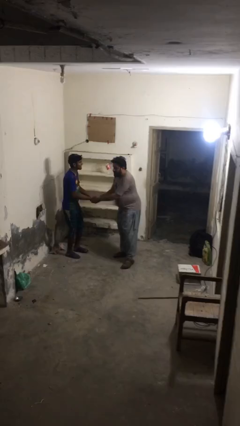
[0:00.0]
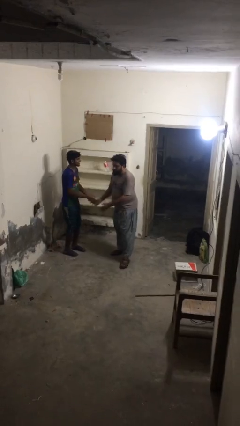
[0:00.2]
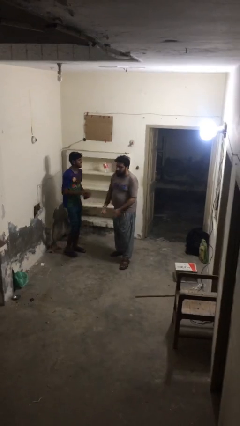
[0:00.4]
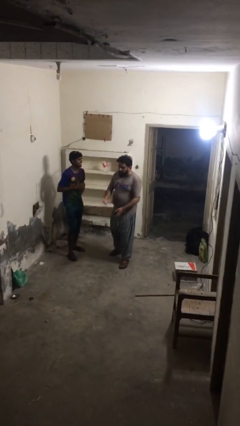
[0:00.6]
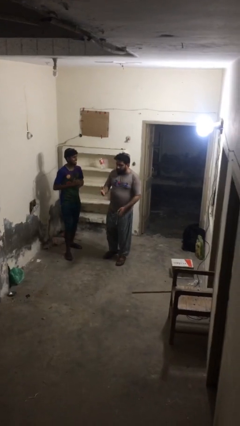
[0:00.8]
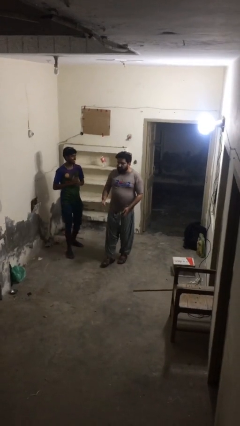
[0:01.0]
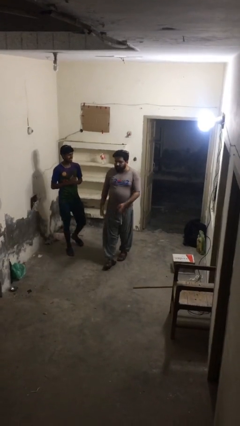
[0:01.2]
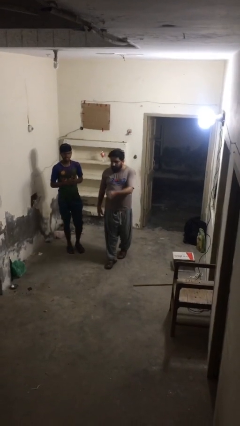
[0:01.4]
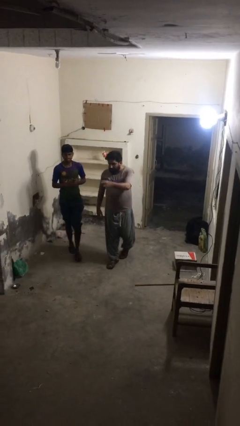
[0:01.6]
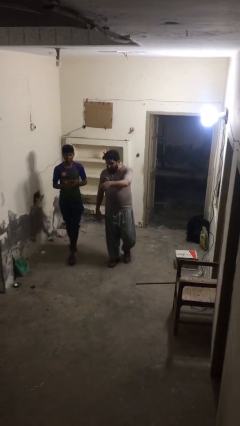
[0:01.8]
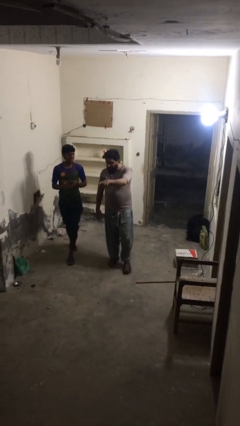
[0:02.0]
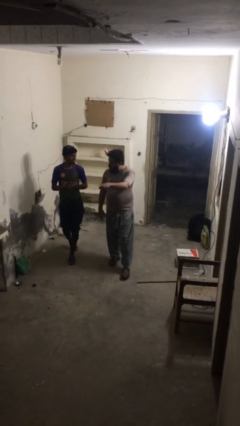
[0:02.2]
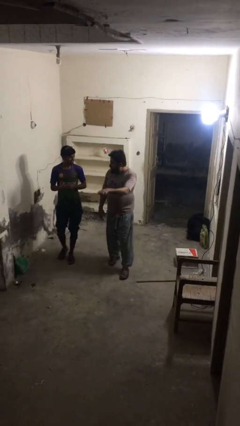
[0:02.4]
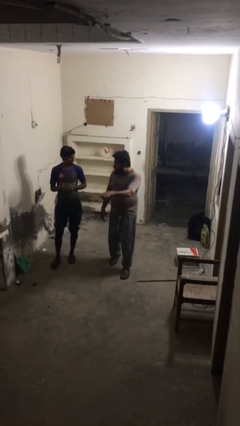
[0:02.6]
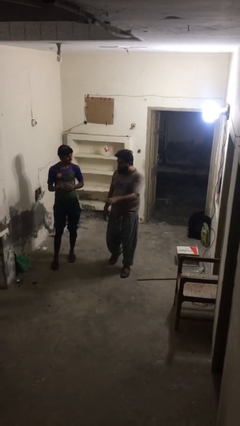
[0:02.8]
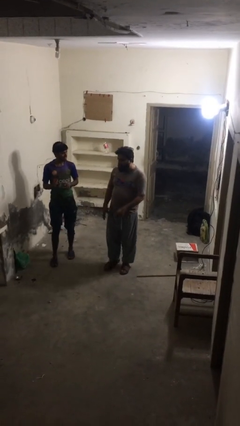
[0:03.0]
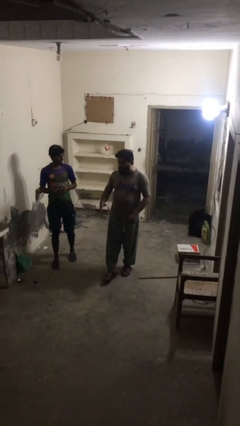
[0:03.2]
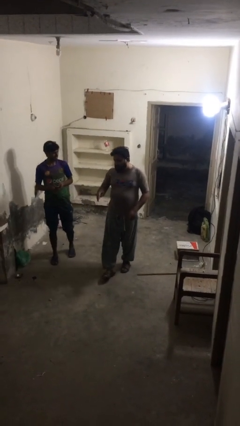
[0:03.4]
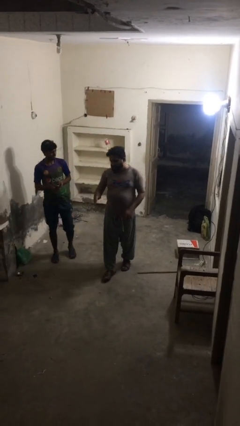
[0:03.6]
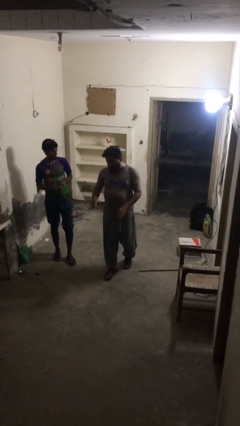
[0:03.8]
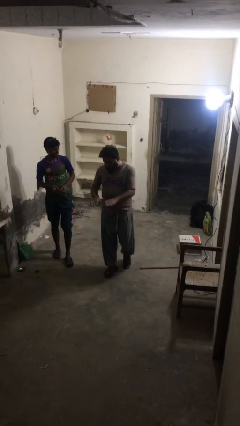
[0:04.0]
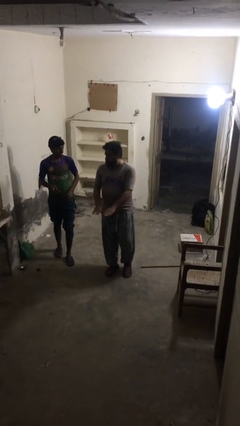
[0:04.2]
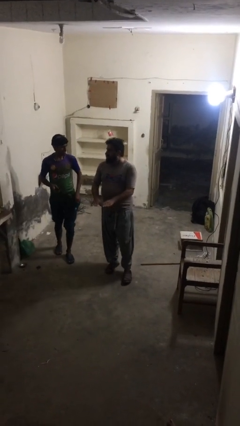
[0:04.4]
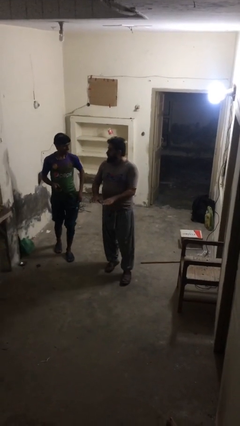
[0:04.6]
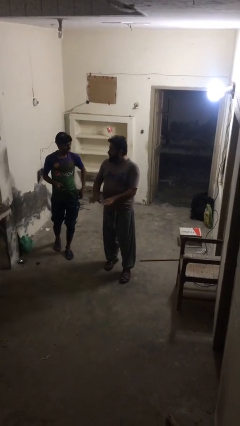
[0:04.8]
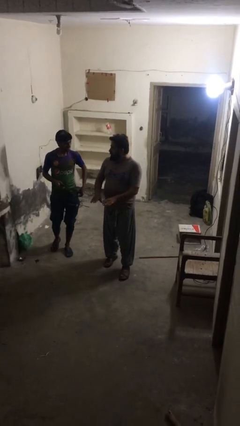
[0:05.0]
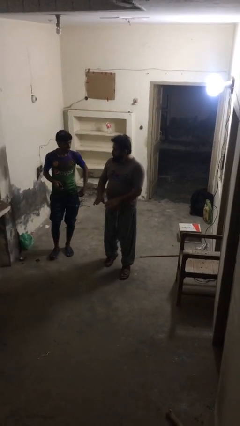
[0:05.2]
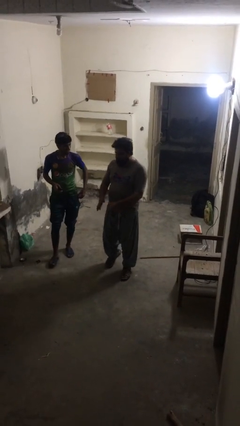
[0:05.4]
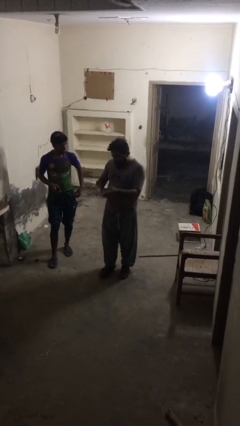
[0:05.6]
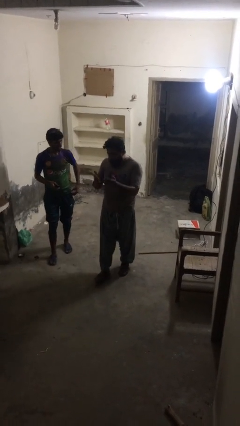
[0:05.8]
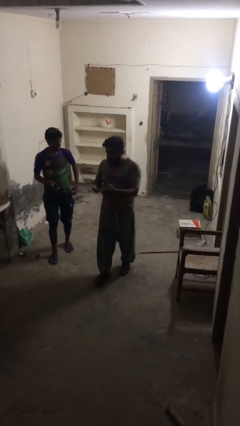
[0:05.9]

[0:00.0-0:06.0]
person talks to person

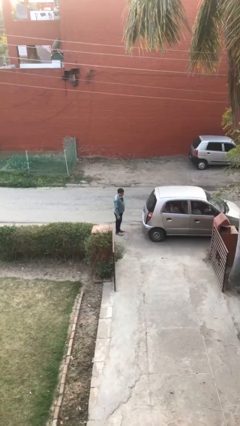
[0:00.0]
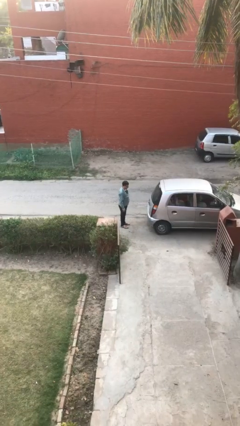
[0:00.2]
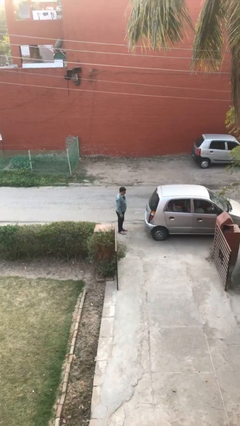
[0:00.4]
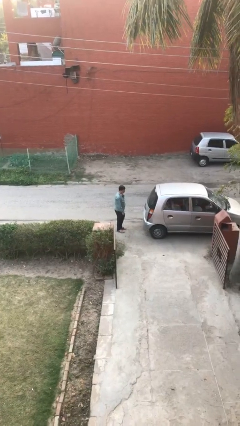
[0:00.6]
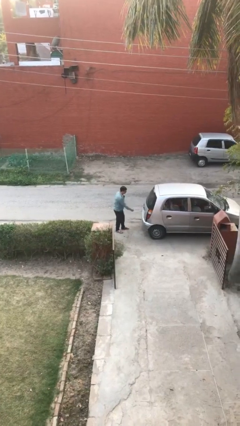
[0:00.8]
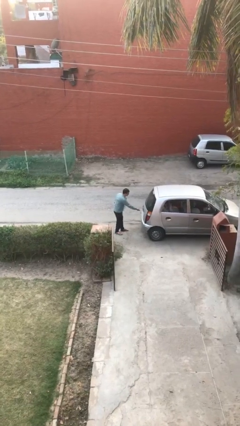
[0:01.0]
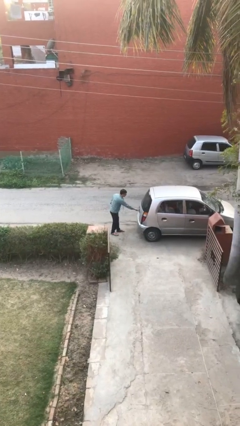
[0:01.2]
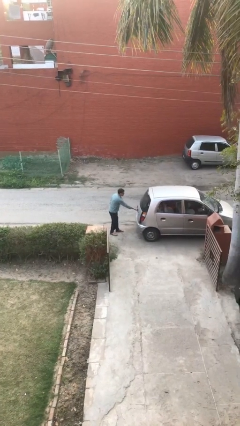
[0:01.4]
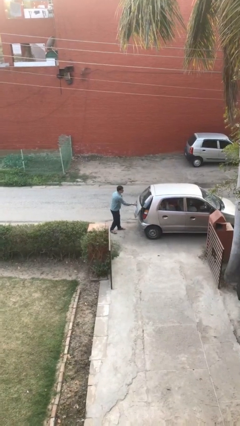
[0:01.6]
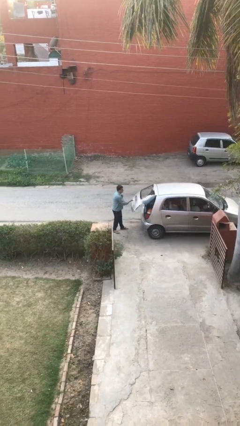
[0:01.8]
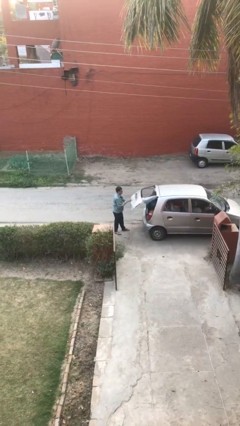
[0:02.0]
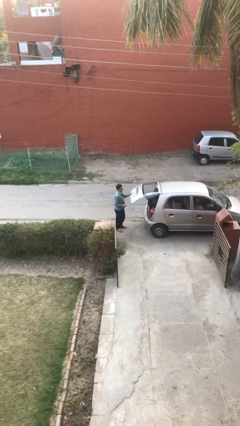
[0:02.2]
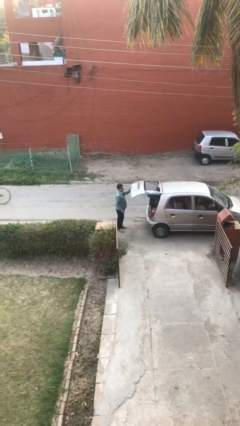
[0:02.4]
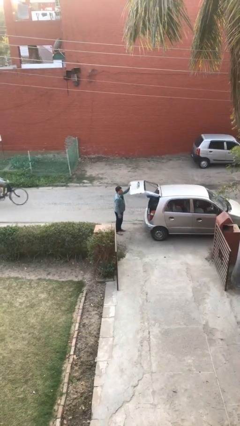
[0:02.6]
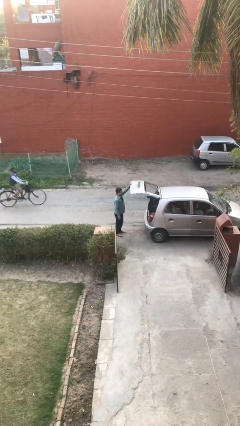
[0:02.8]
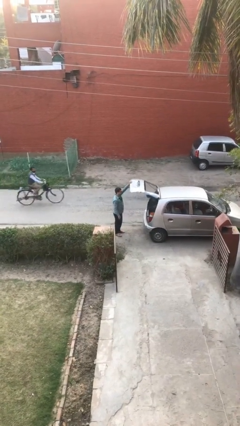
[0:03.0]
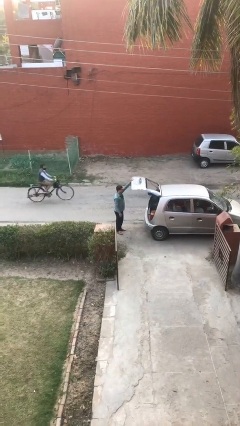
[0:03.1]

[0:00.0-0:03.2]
person opens car trunk

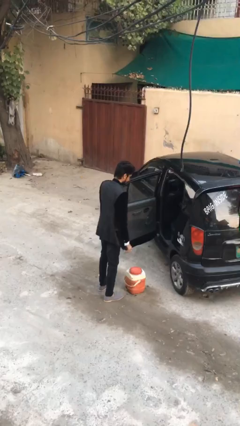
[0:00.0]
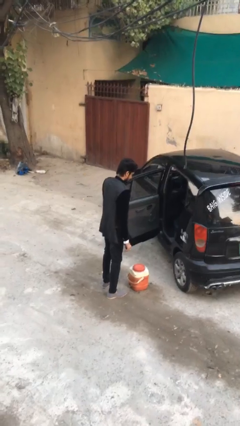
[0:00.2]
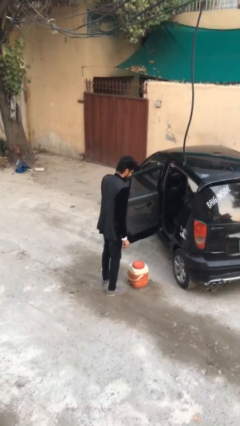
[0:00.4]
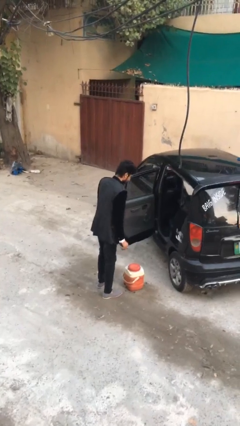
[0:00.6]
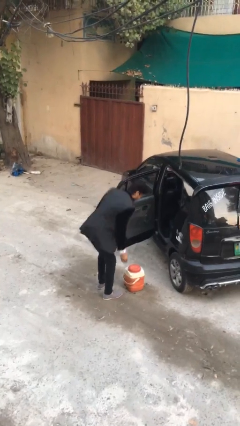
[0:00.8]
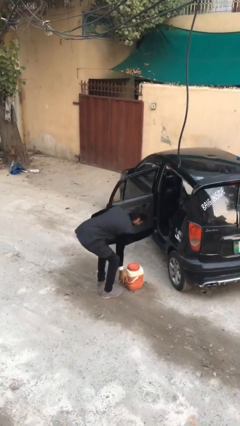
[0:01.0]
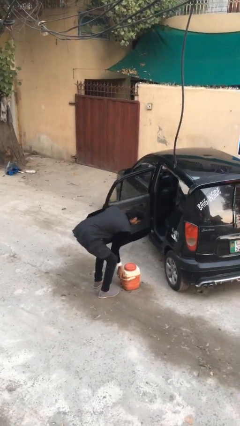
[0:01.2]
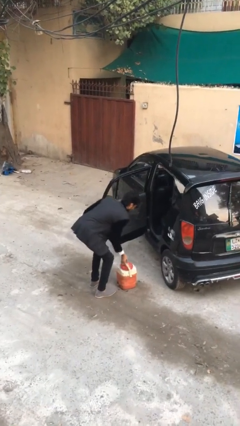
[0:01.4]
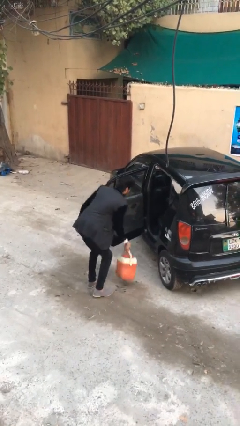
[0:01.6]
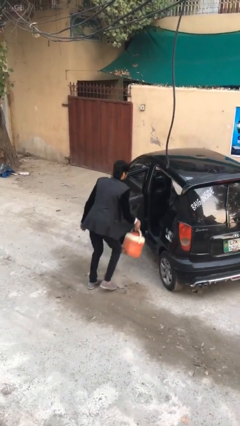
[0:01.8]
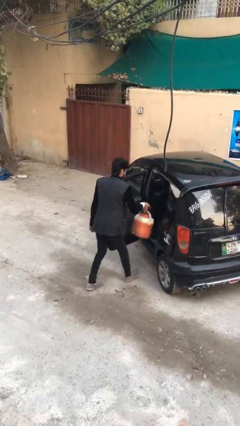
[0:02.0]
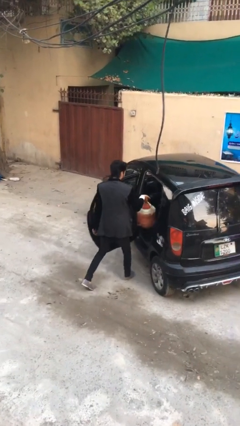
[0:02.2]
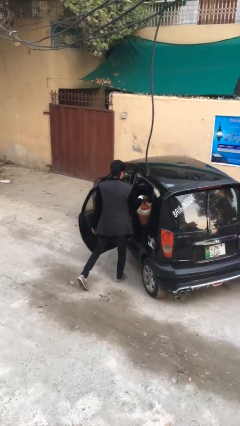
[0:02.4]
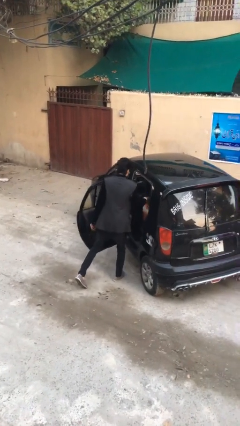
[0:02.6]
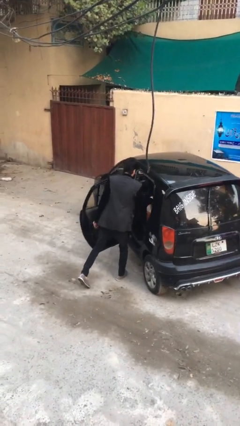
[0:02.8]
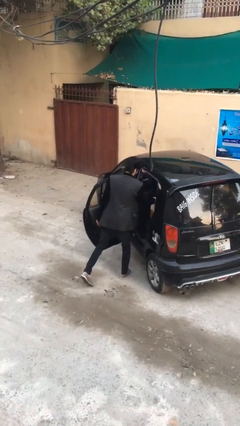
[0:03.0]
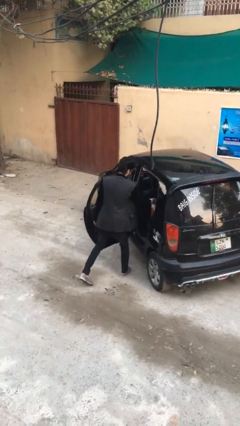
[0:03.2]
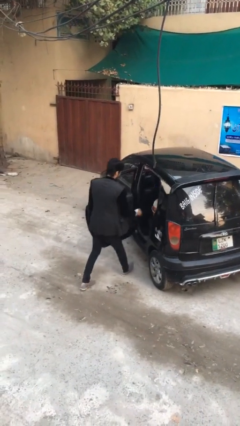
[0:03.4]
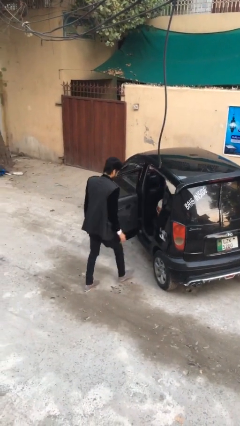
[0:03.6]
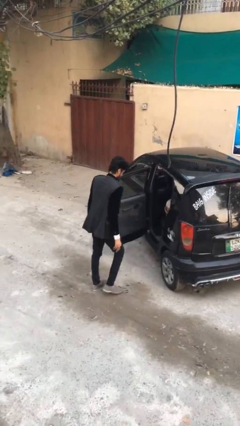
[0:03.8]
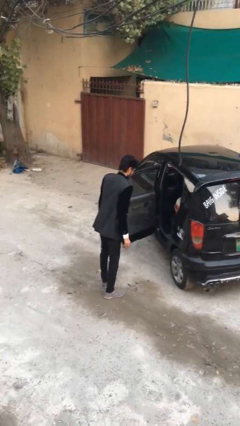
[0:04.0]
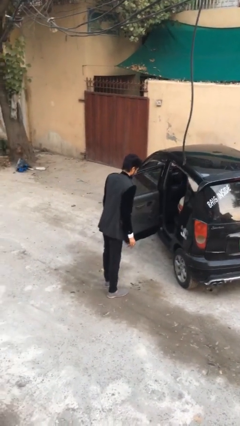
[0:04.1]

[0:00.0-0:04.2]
person loads car

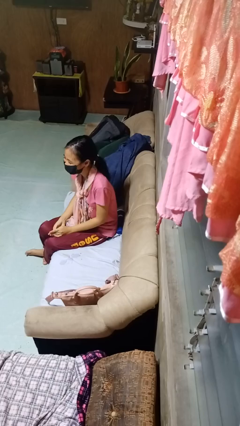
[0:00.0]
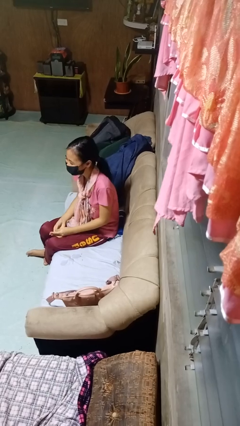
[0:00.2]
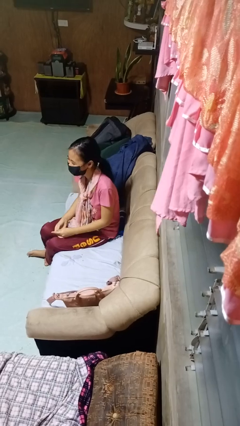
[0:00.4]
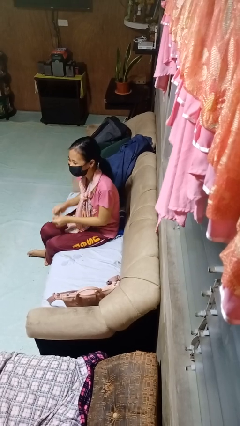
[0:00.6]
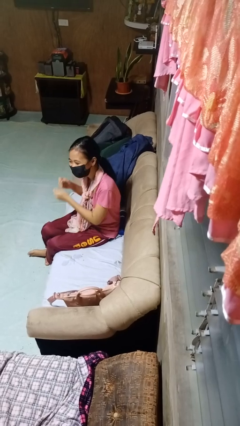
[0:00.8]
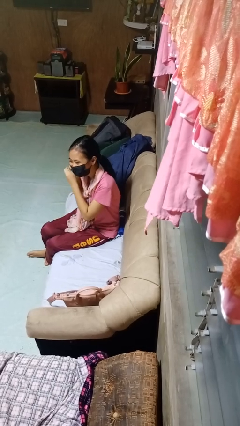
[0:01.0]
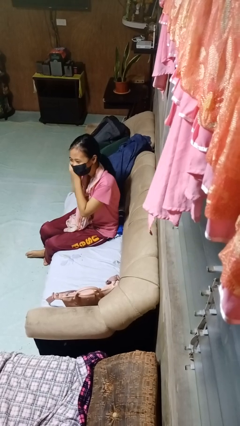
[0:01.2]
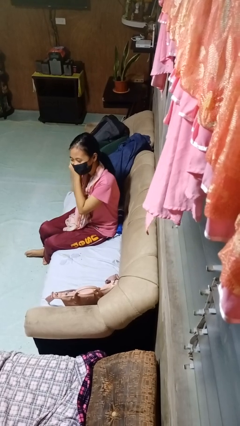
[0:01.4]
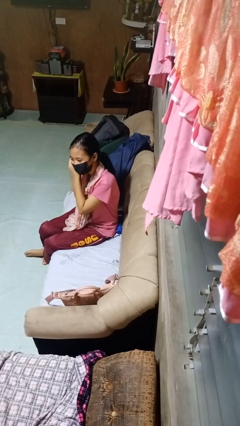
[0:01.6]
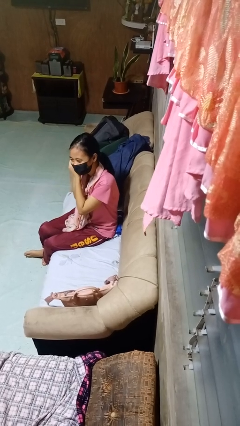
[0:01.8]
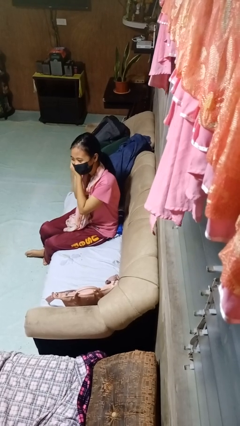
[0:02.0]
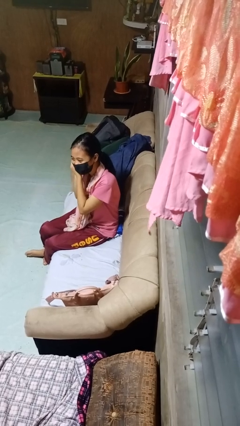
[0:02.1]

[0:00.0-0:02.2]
person puts on earrings

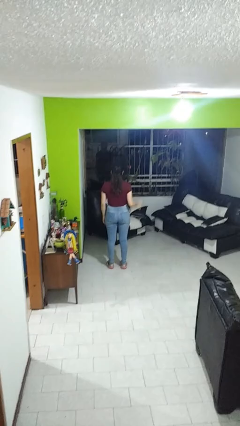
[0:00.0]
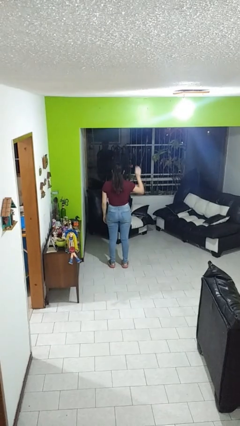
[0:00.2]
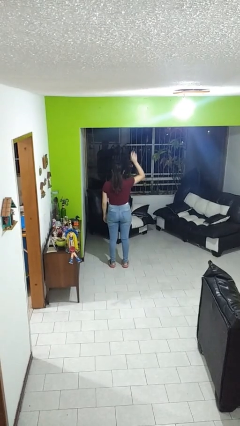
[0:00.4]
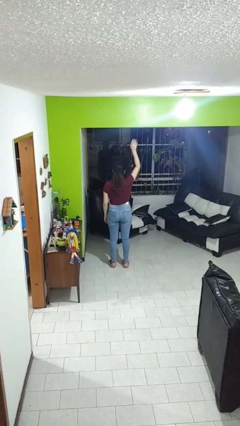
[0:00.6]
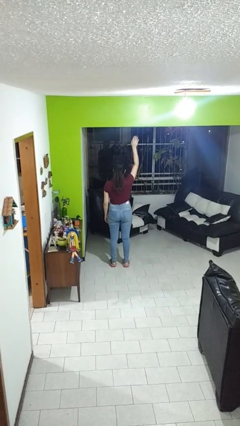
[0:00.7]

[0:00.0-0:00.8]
person gestures raise hand

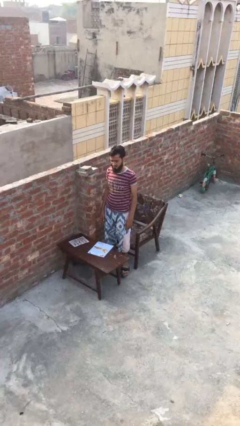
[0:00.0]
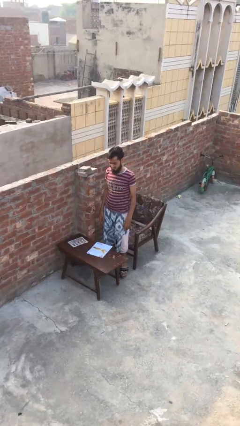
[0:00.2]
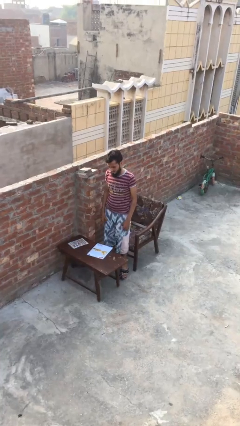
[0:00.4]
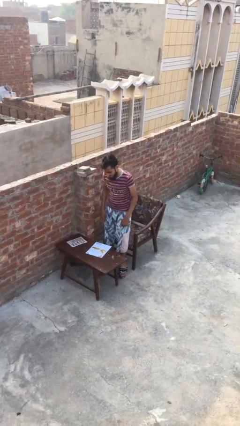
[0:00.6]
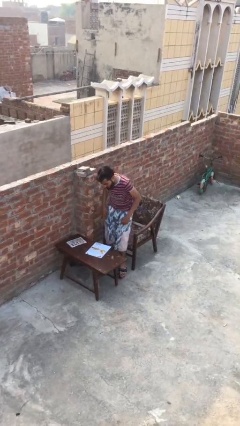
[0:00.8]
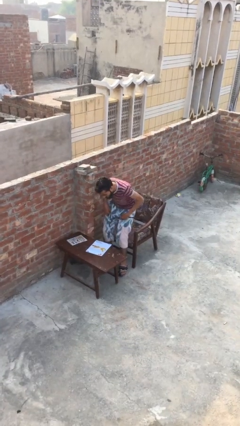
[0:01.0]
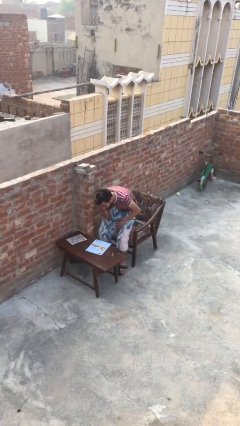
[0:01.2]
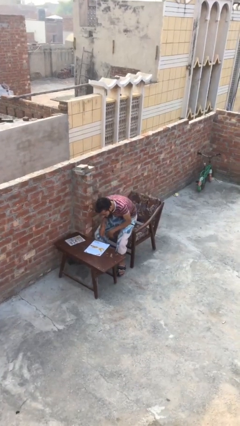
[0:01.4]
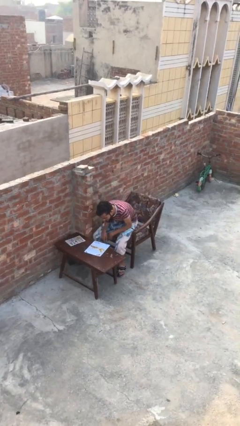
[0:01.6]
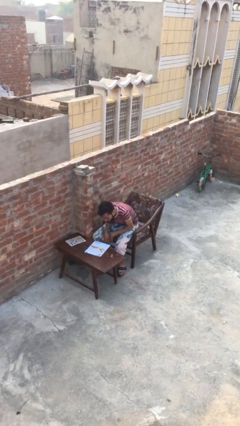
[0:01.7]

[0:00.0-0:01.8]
person sits down
